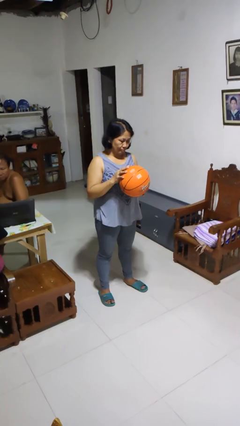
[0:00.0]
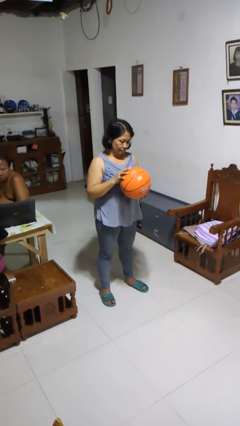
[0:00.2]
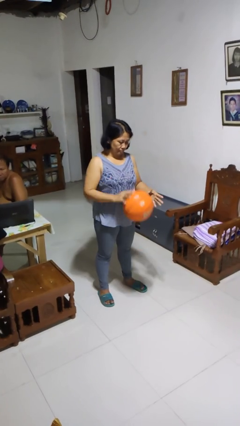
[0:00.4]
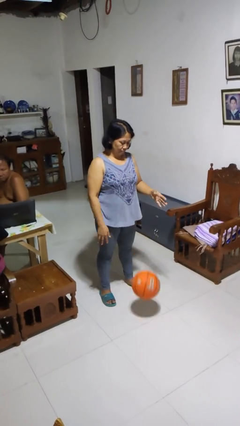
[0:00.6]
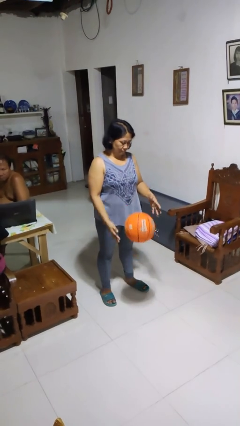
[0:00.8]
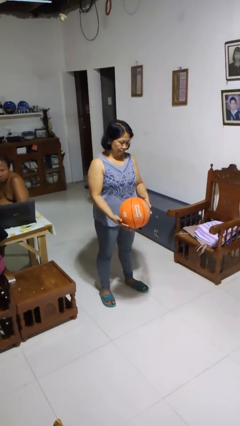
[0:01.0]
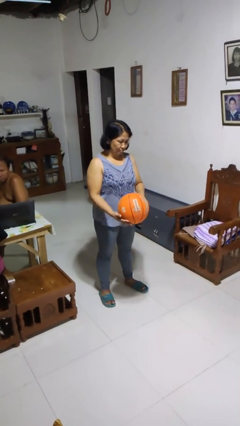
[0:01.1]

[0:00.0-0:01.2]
person bounces ball on floor

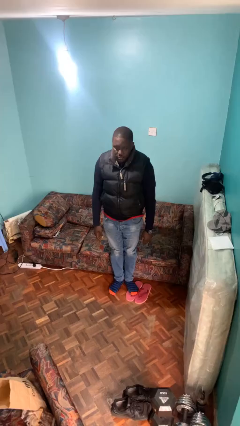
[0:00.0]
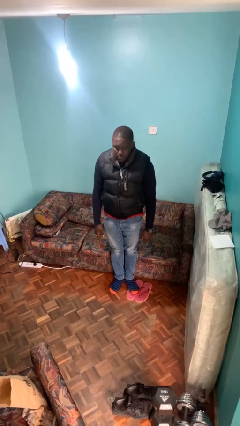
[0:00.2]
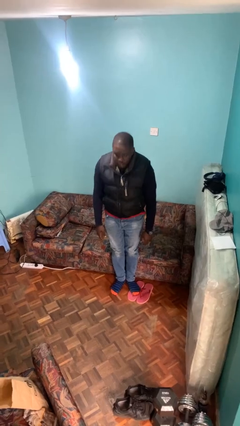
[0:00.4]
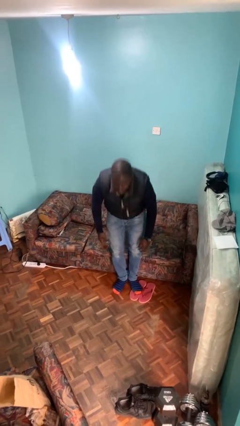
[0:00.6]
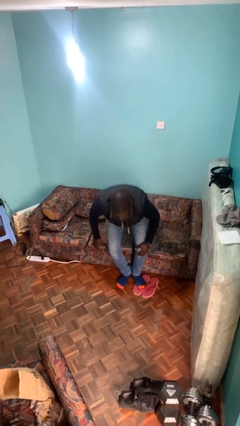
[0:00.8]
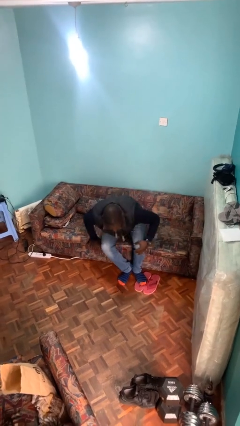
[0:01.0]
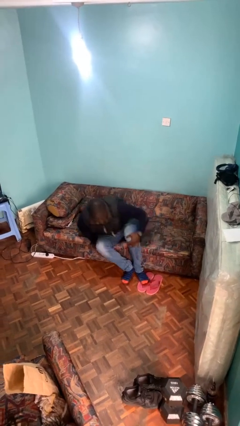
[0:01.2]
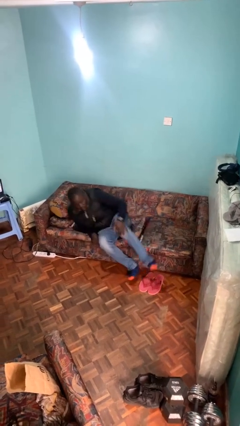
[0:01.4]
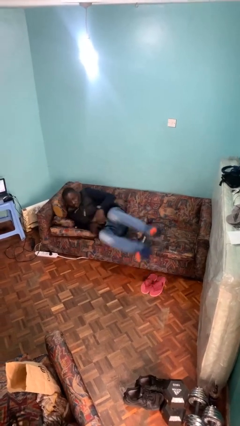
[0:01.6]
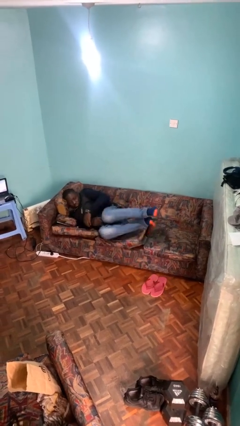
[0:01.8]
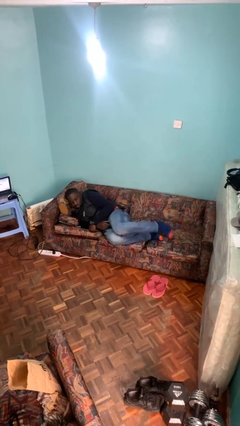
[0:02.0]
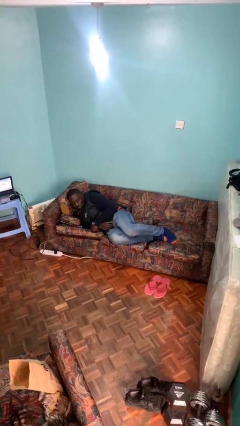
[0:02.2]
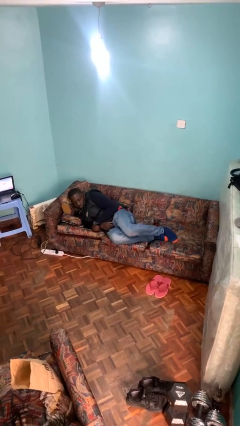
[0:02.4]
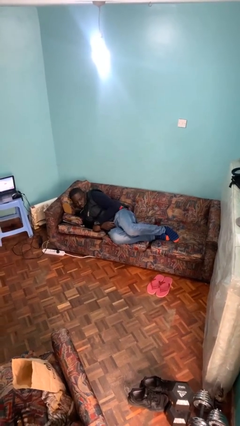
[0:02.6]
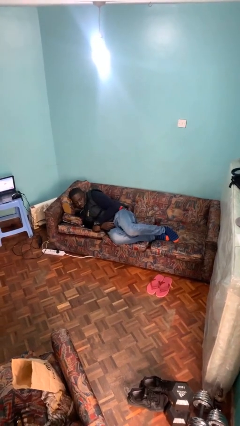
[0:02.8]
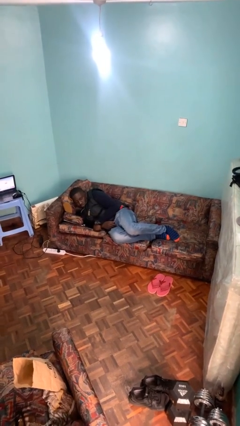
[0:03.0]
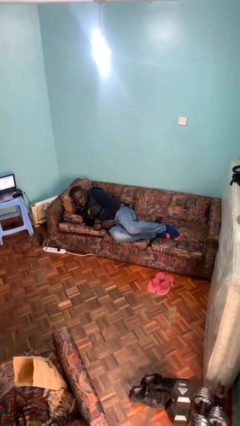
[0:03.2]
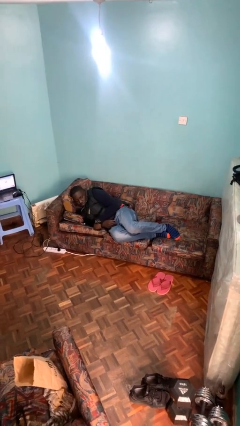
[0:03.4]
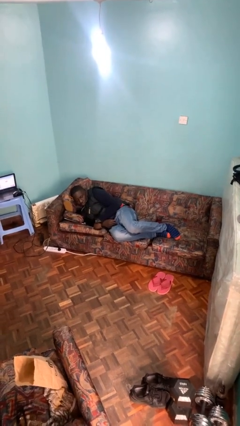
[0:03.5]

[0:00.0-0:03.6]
person lies down on couch

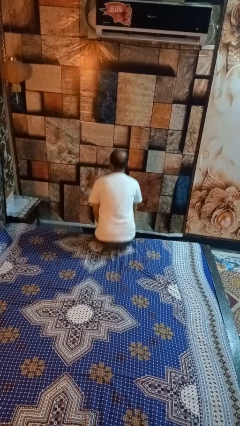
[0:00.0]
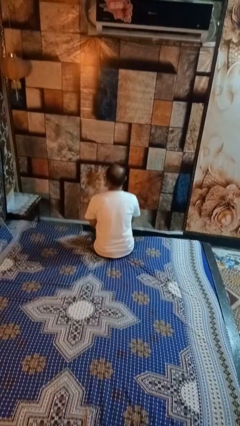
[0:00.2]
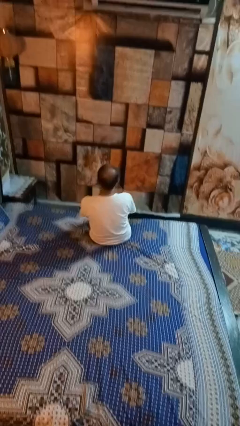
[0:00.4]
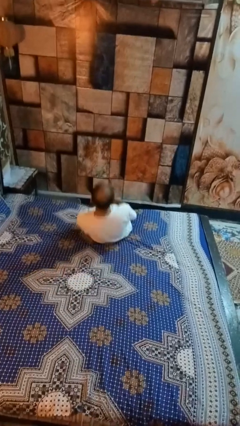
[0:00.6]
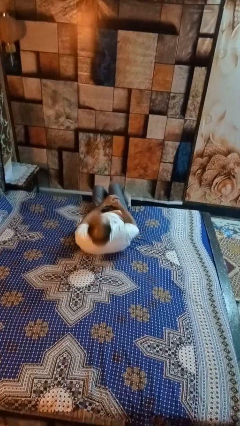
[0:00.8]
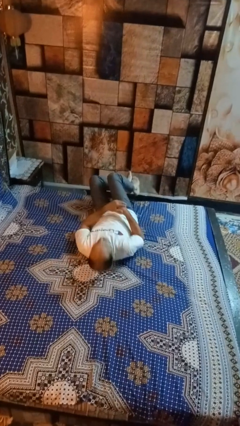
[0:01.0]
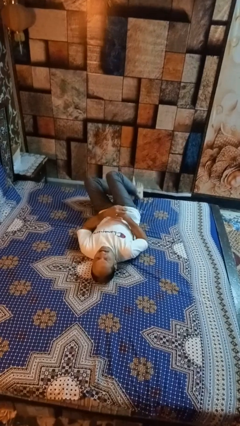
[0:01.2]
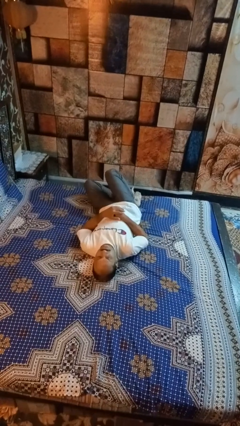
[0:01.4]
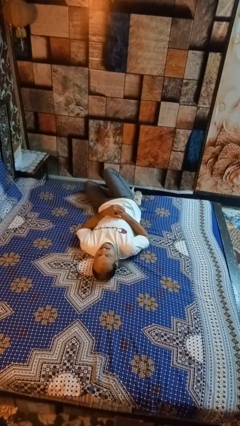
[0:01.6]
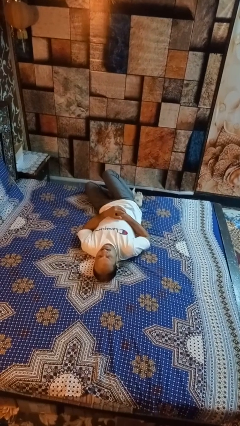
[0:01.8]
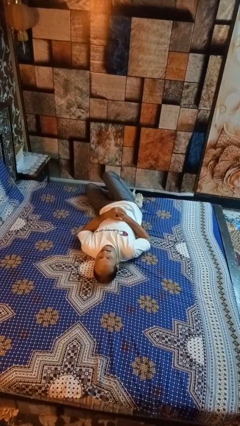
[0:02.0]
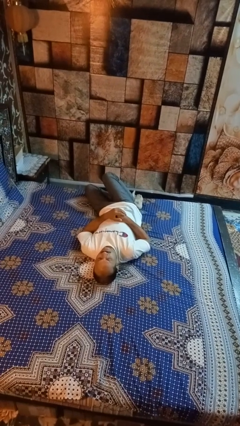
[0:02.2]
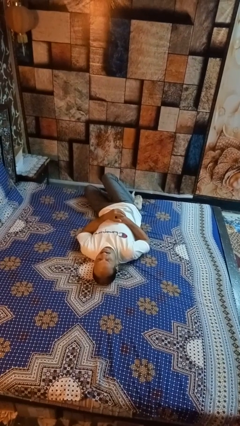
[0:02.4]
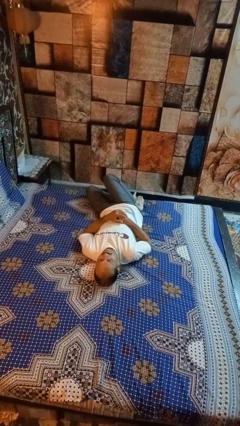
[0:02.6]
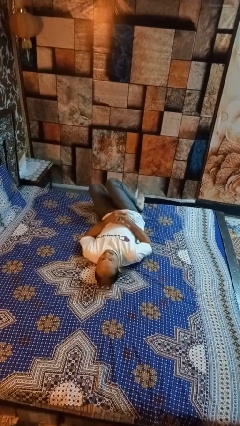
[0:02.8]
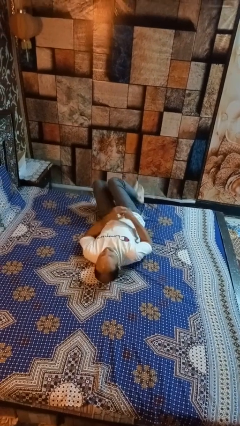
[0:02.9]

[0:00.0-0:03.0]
person lies down on bed

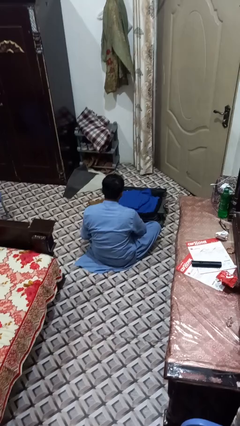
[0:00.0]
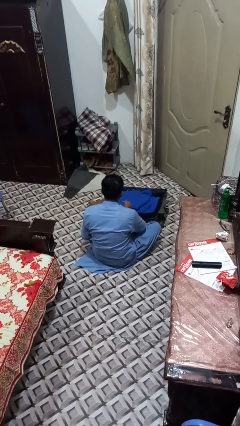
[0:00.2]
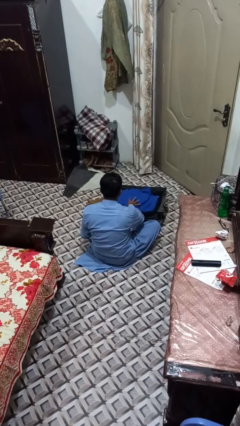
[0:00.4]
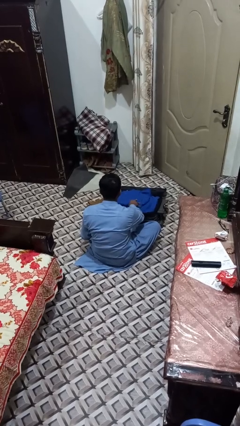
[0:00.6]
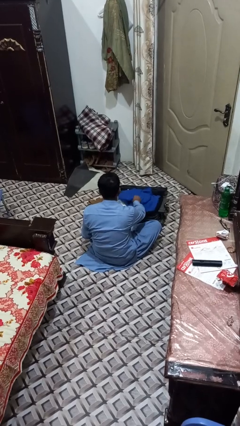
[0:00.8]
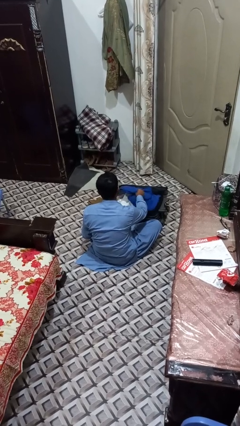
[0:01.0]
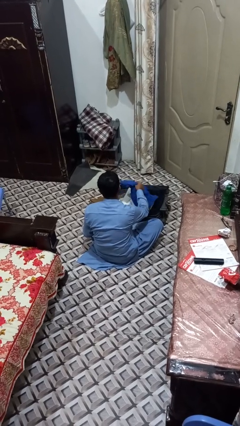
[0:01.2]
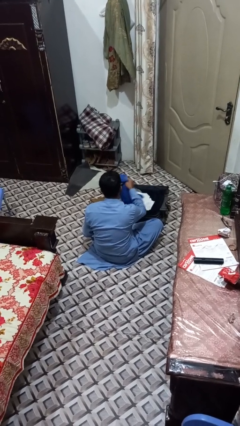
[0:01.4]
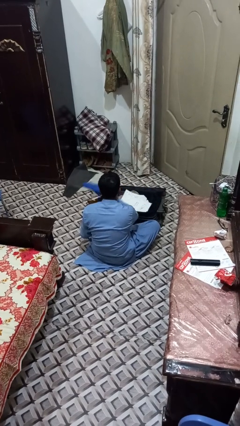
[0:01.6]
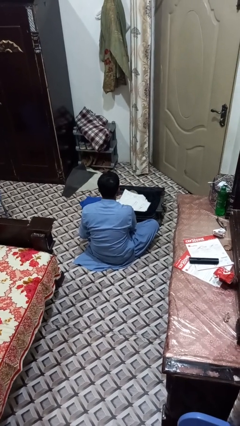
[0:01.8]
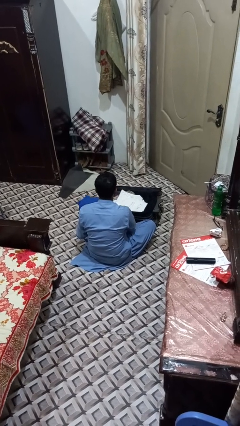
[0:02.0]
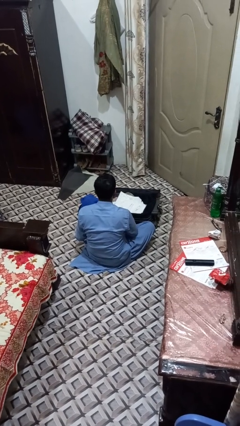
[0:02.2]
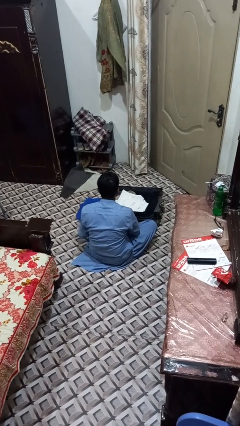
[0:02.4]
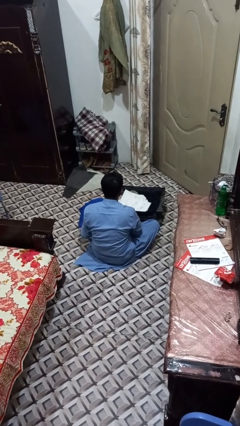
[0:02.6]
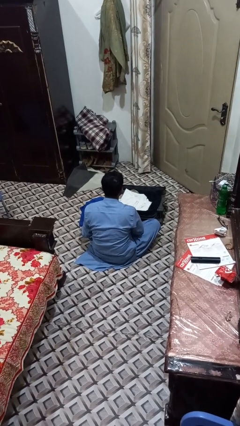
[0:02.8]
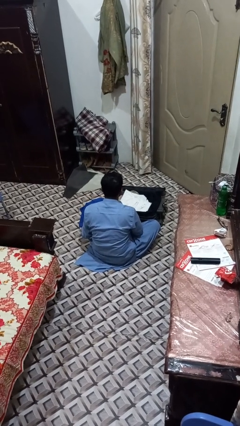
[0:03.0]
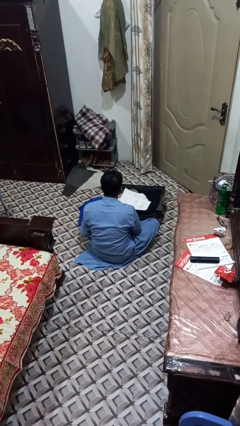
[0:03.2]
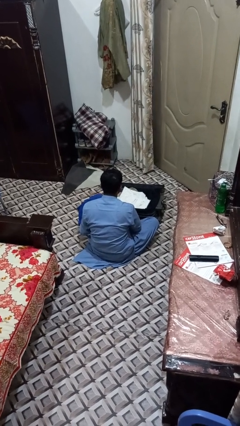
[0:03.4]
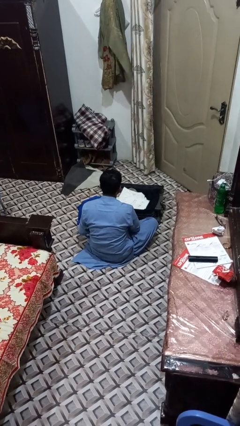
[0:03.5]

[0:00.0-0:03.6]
person unloads clothes from suitcase

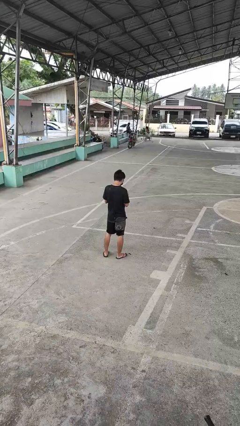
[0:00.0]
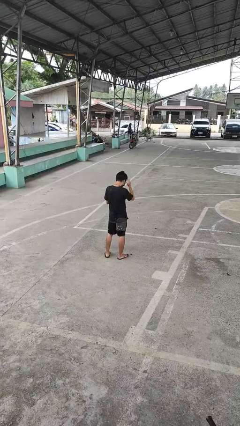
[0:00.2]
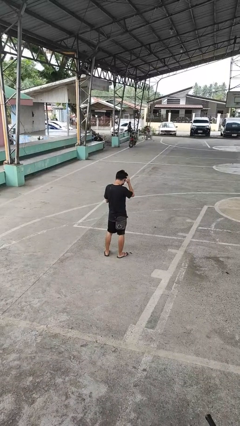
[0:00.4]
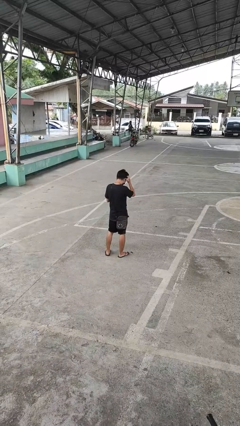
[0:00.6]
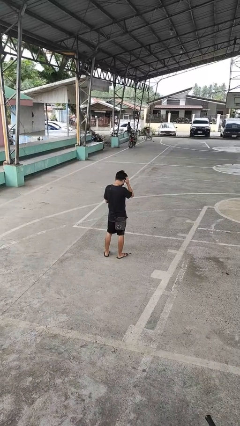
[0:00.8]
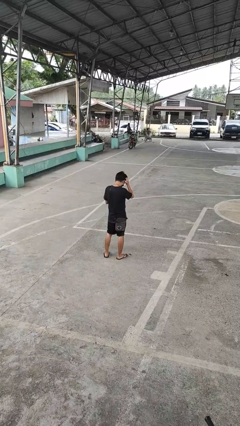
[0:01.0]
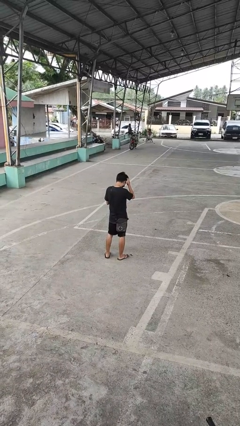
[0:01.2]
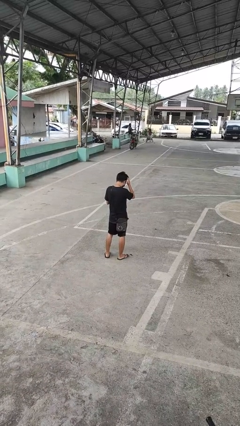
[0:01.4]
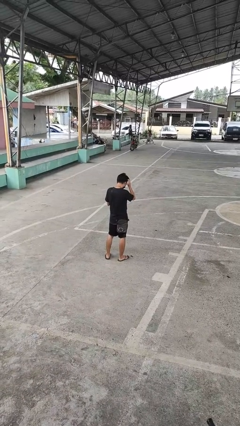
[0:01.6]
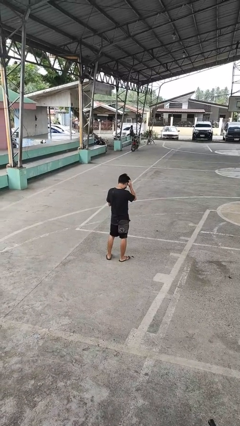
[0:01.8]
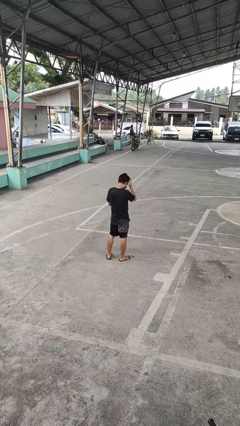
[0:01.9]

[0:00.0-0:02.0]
person scratches face

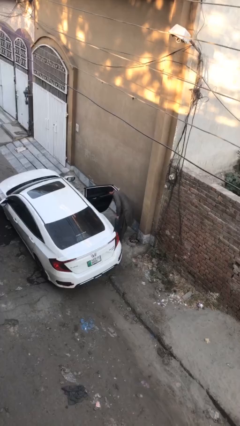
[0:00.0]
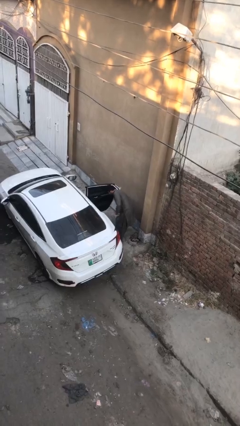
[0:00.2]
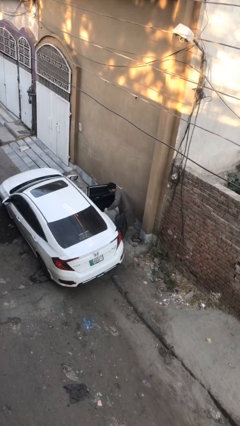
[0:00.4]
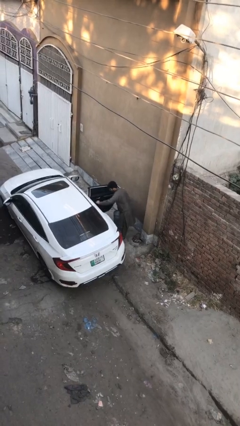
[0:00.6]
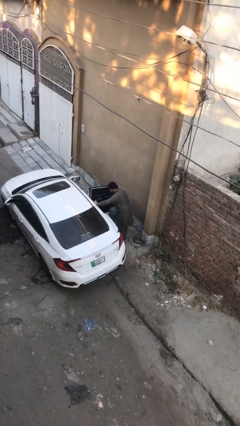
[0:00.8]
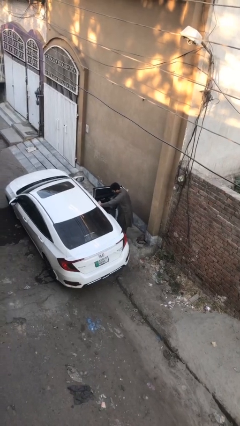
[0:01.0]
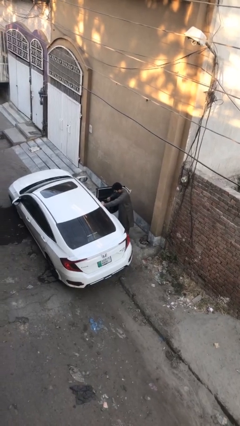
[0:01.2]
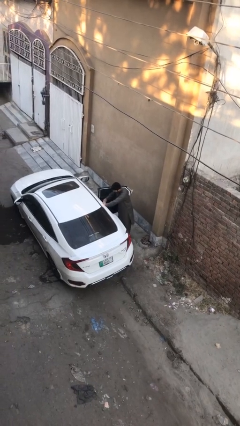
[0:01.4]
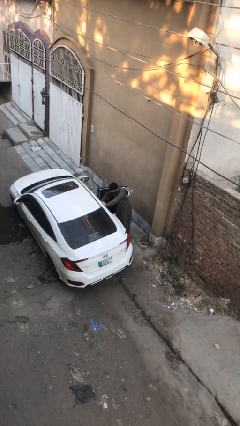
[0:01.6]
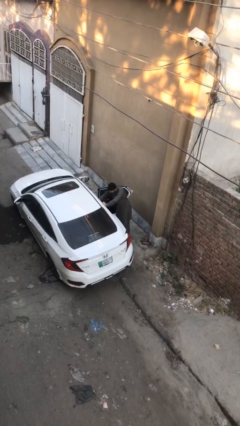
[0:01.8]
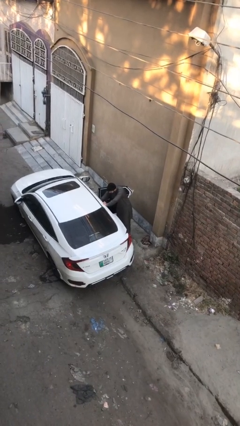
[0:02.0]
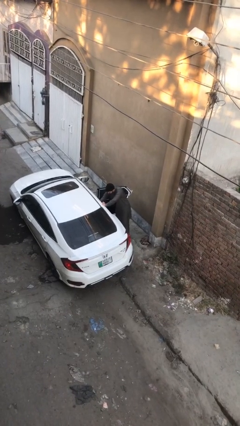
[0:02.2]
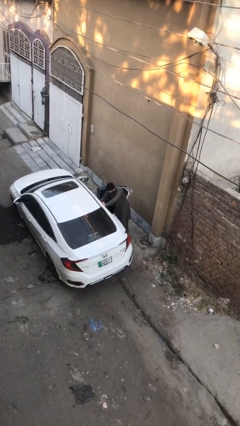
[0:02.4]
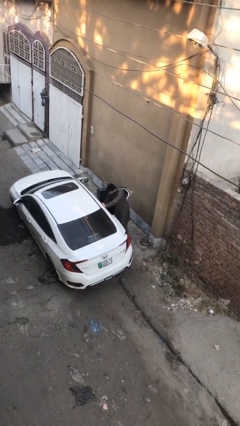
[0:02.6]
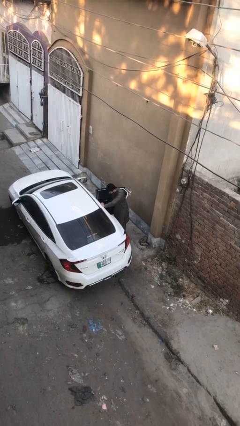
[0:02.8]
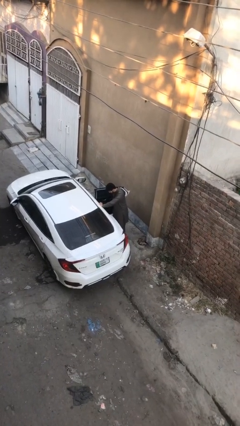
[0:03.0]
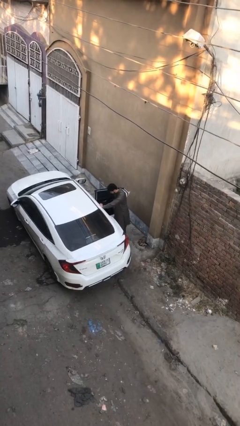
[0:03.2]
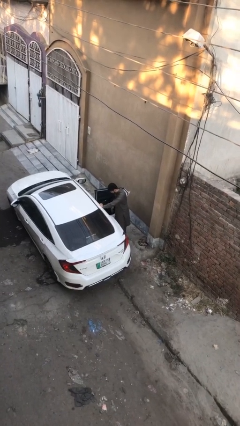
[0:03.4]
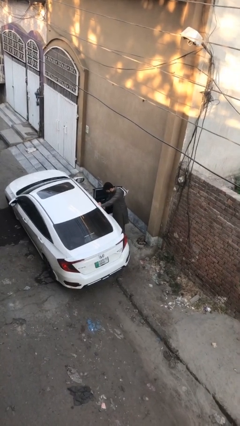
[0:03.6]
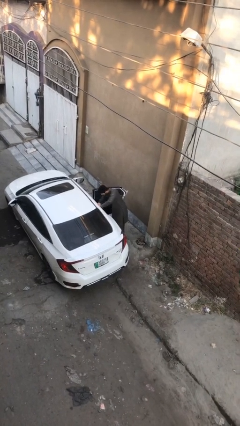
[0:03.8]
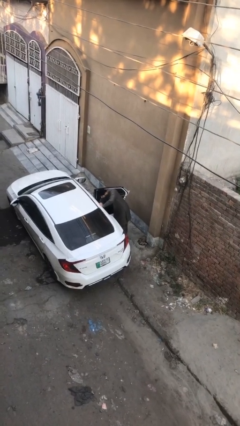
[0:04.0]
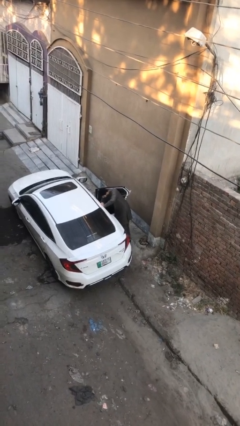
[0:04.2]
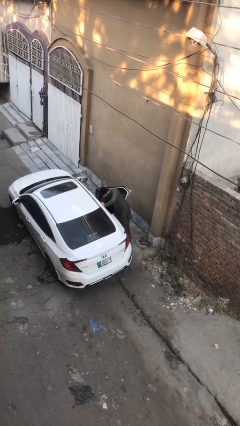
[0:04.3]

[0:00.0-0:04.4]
person loads car
